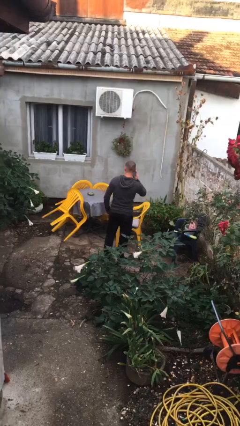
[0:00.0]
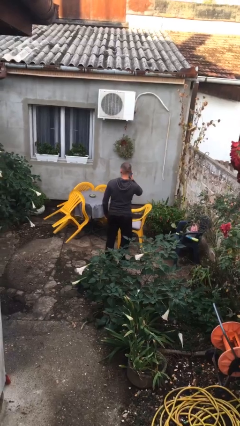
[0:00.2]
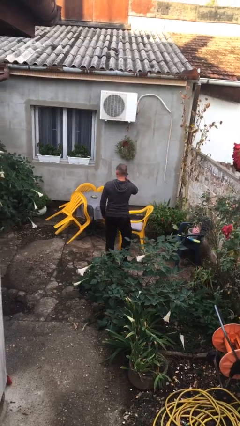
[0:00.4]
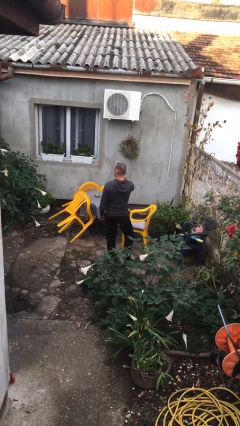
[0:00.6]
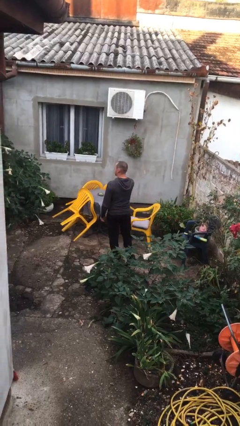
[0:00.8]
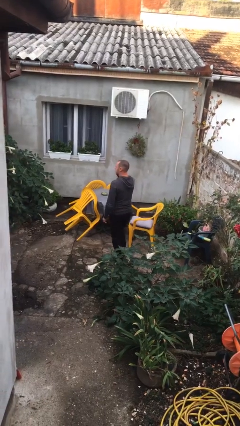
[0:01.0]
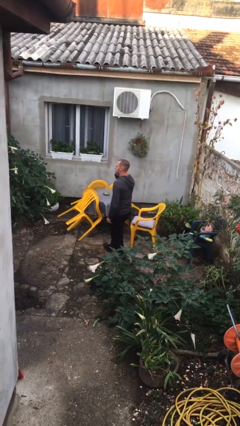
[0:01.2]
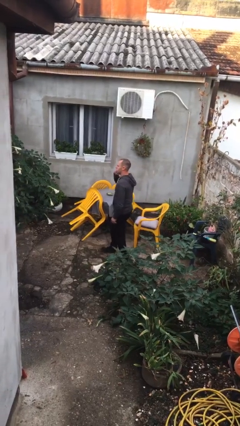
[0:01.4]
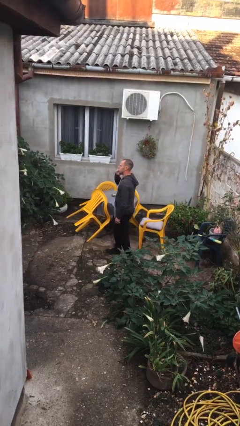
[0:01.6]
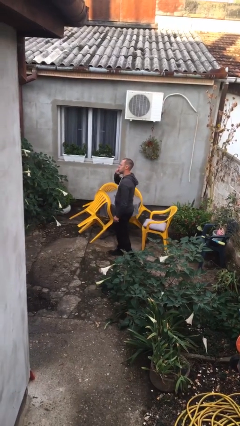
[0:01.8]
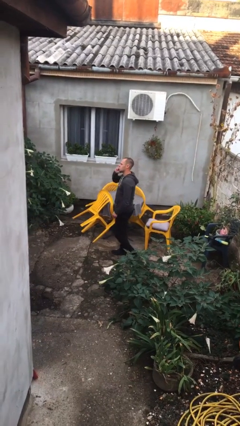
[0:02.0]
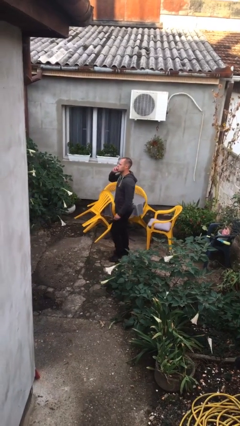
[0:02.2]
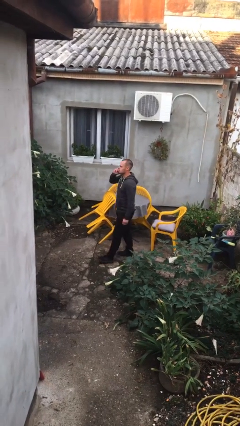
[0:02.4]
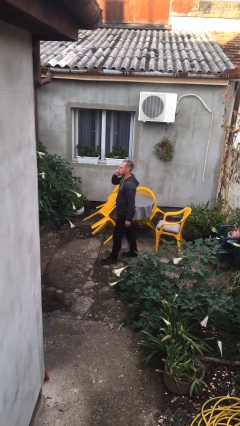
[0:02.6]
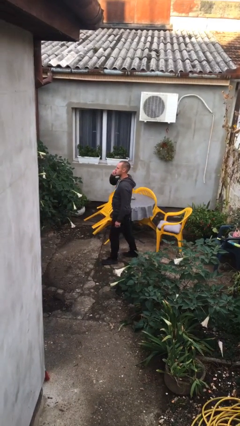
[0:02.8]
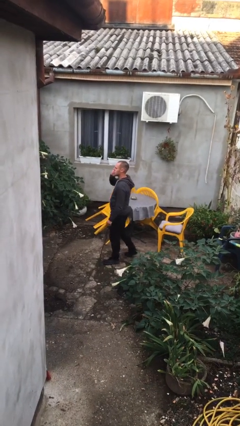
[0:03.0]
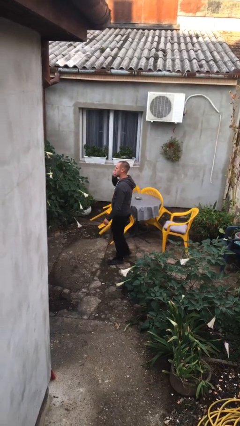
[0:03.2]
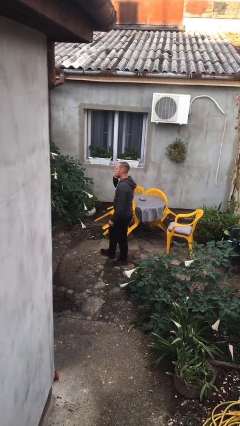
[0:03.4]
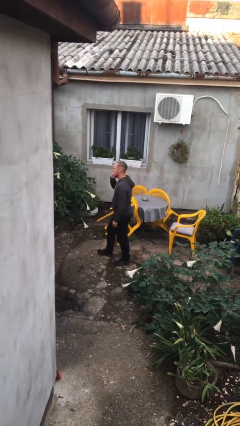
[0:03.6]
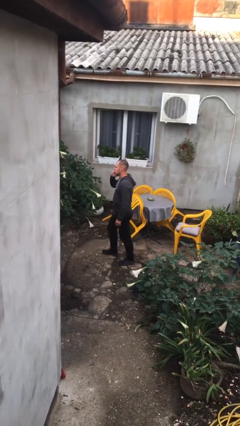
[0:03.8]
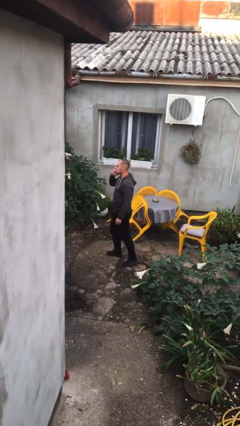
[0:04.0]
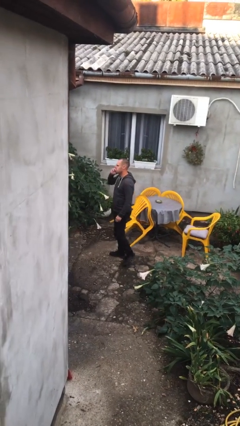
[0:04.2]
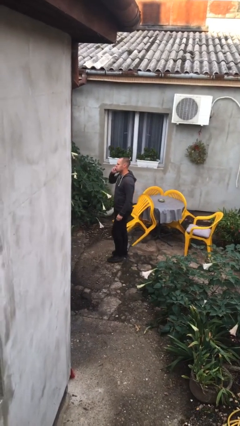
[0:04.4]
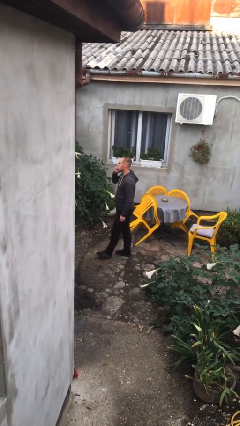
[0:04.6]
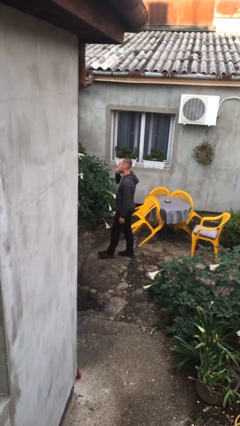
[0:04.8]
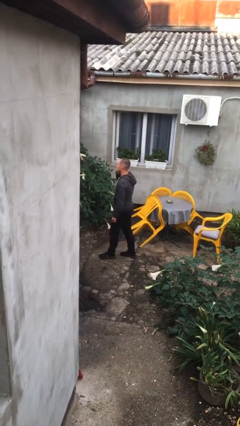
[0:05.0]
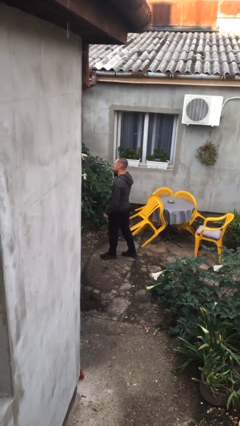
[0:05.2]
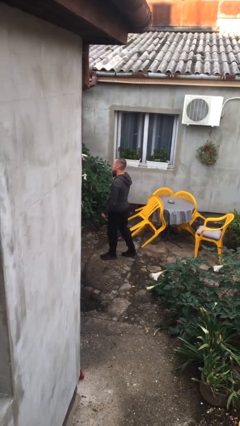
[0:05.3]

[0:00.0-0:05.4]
person talks on phone

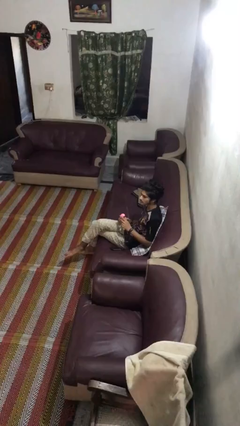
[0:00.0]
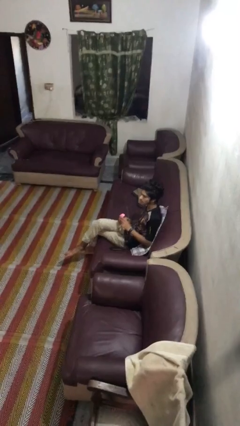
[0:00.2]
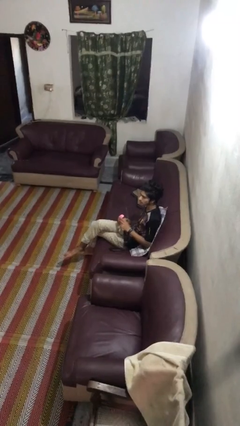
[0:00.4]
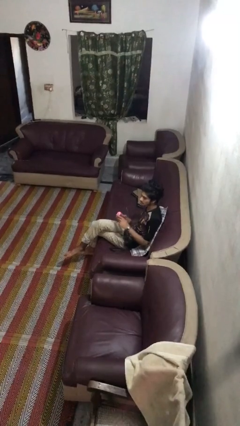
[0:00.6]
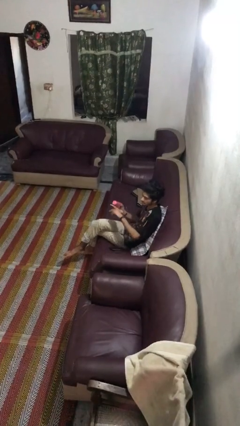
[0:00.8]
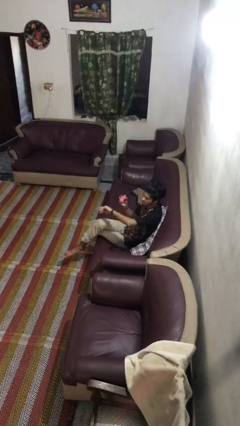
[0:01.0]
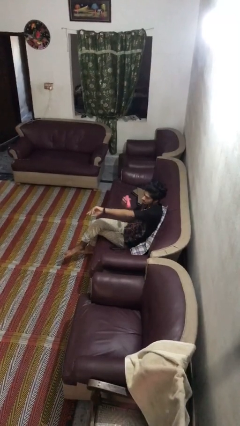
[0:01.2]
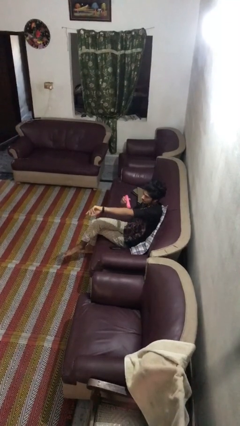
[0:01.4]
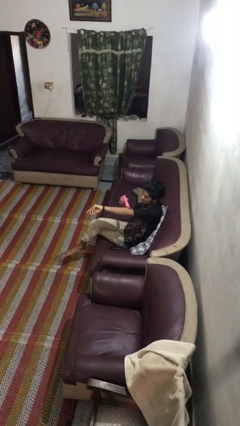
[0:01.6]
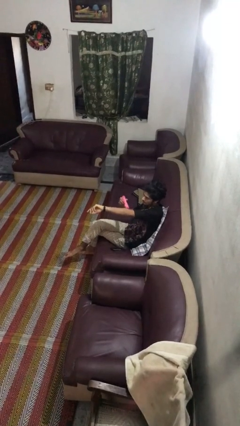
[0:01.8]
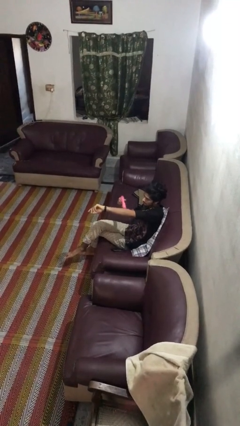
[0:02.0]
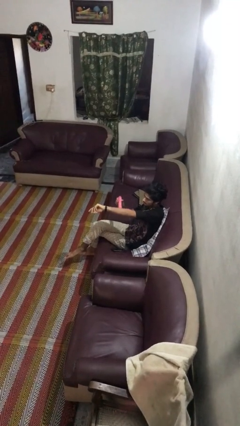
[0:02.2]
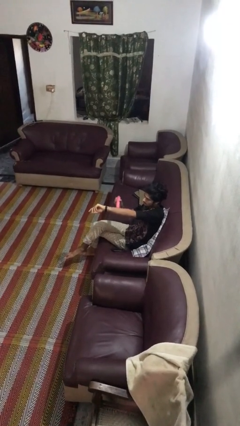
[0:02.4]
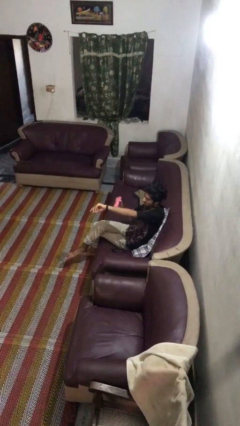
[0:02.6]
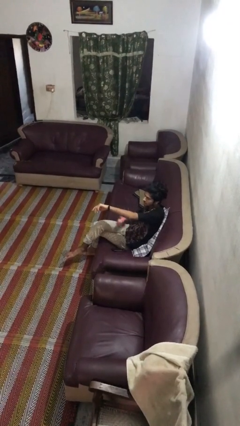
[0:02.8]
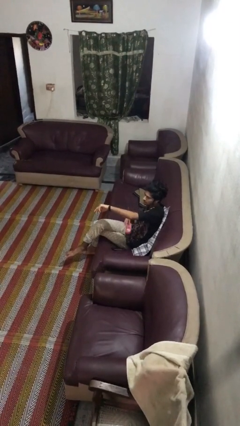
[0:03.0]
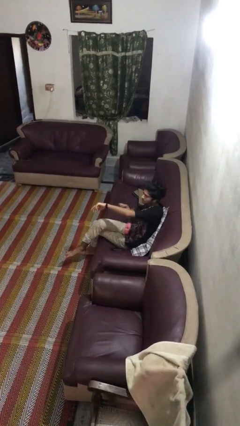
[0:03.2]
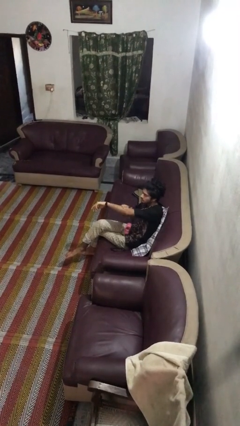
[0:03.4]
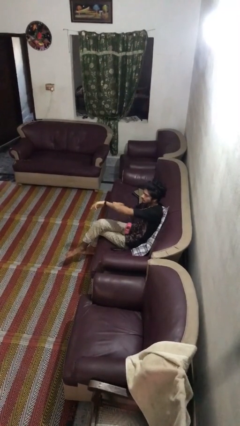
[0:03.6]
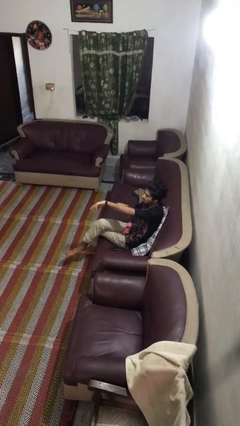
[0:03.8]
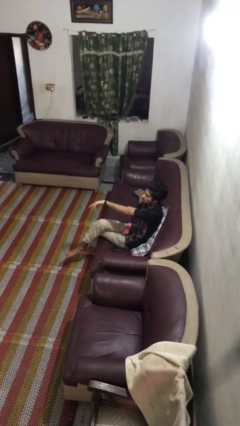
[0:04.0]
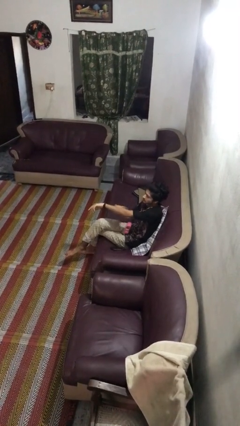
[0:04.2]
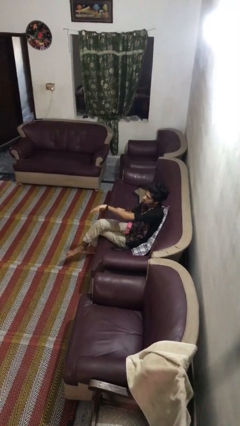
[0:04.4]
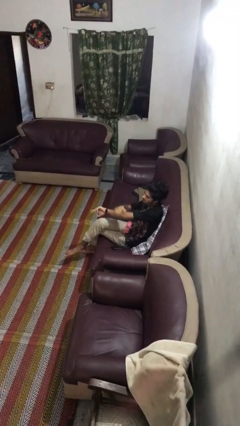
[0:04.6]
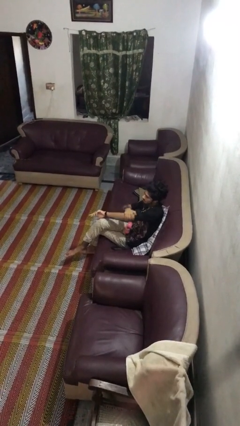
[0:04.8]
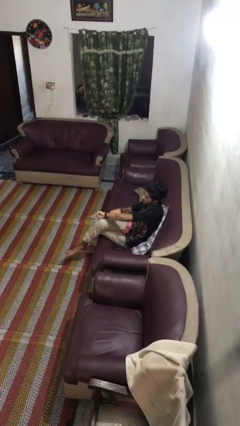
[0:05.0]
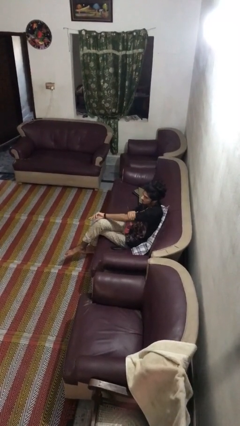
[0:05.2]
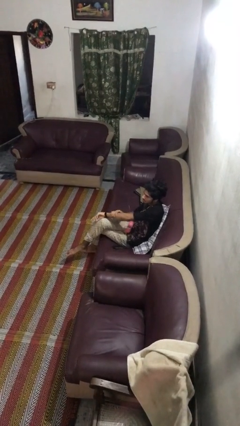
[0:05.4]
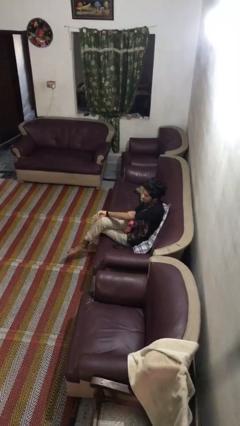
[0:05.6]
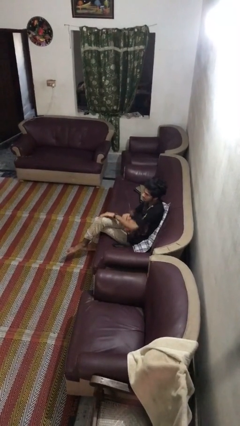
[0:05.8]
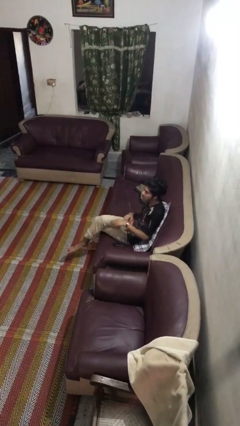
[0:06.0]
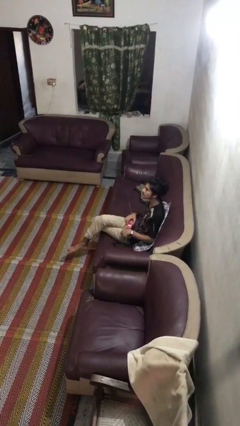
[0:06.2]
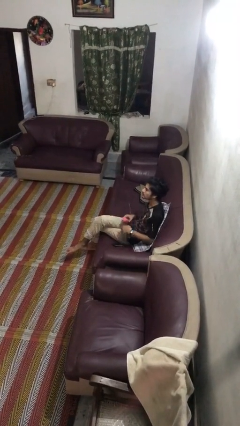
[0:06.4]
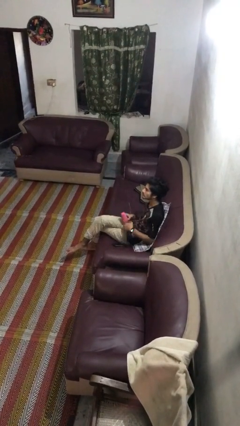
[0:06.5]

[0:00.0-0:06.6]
person applies sunscreen

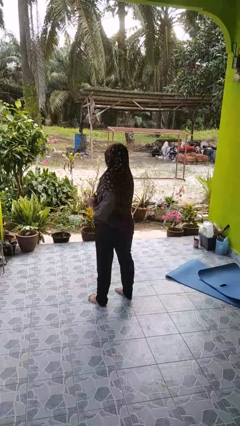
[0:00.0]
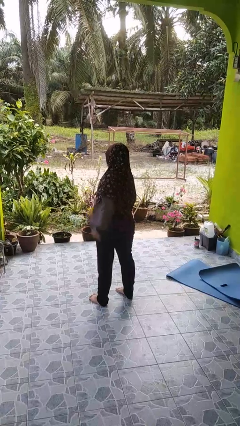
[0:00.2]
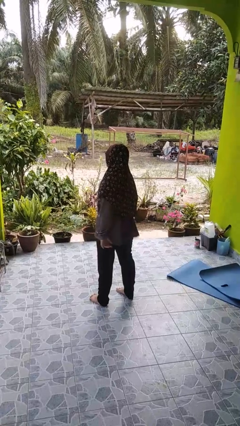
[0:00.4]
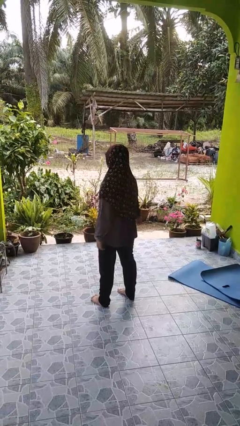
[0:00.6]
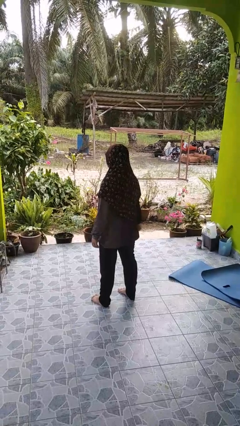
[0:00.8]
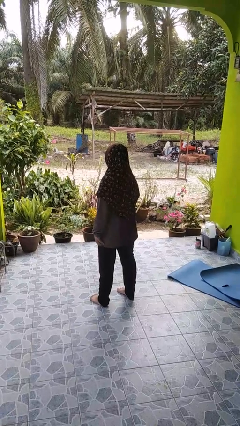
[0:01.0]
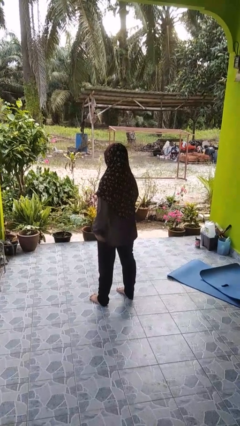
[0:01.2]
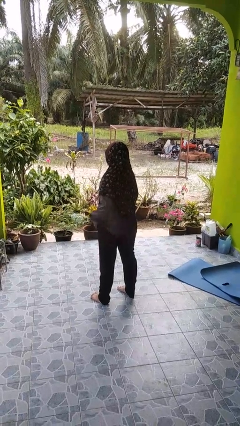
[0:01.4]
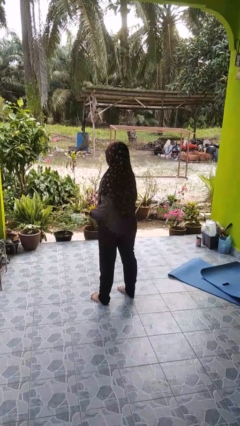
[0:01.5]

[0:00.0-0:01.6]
person untucks shirt

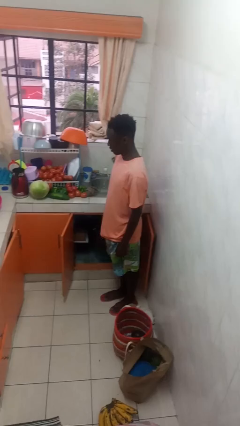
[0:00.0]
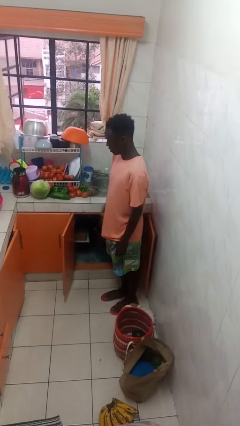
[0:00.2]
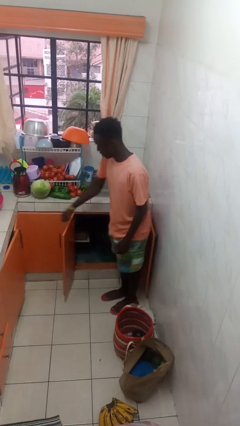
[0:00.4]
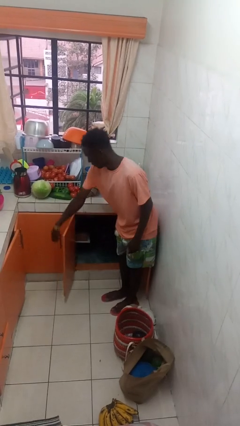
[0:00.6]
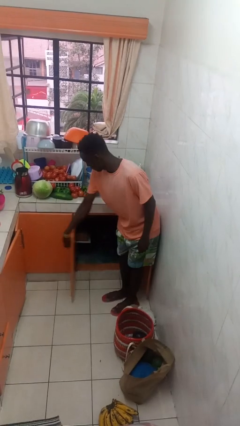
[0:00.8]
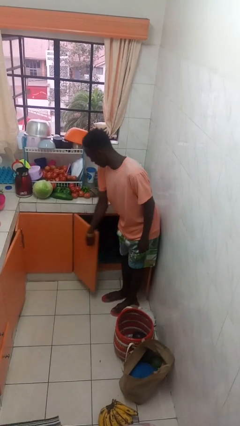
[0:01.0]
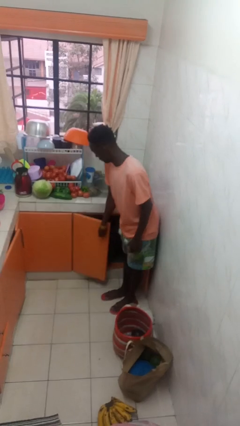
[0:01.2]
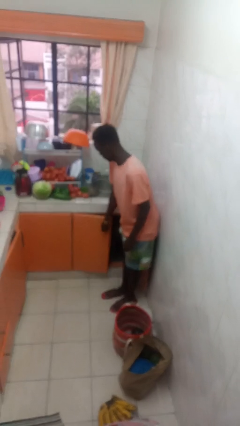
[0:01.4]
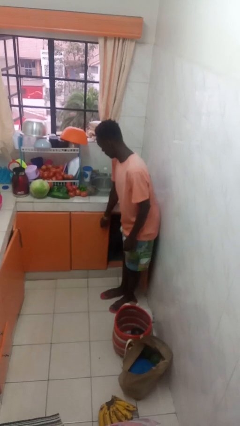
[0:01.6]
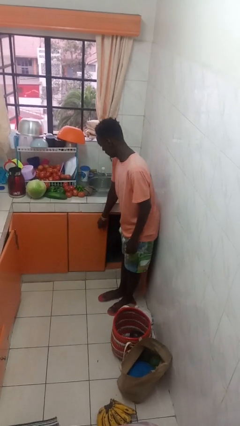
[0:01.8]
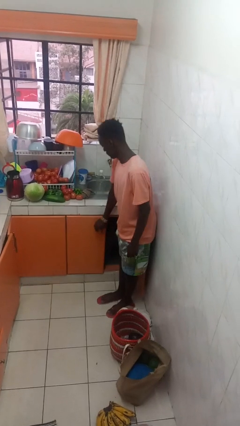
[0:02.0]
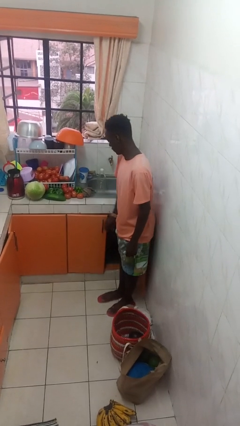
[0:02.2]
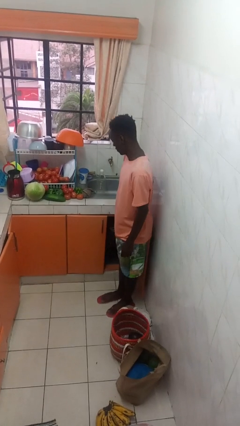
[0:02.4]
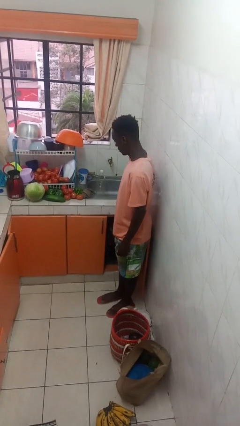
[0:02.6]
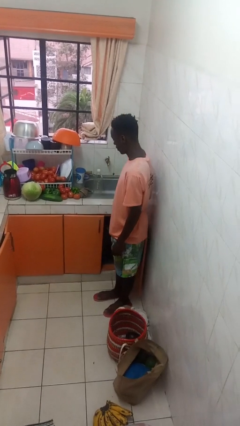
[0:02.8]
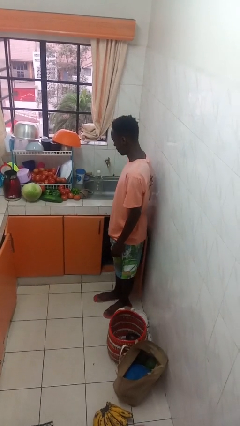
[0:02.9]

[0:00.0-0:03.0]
person closes cabinet

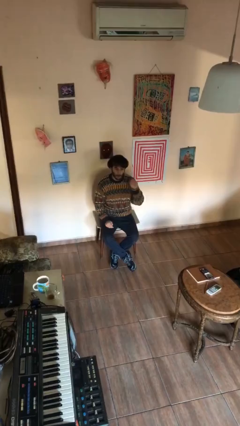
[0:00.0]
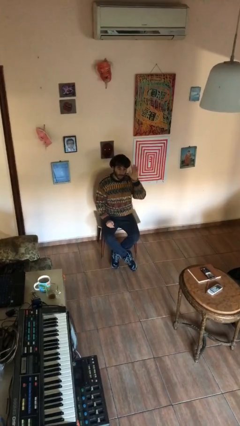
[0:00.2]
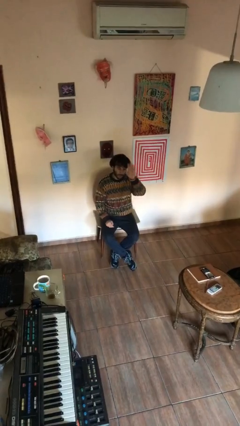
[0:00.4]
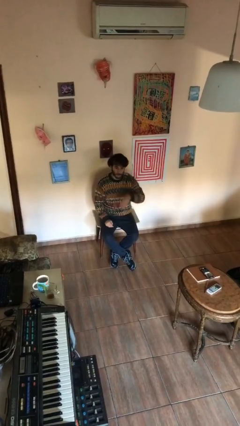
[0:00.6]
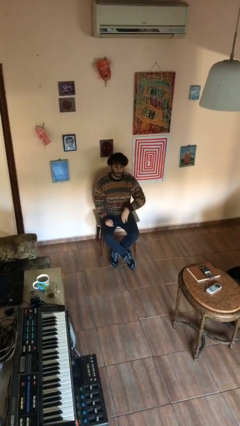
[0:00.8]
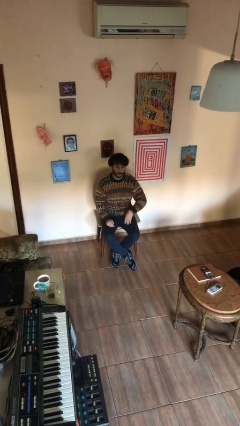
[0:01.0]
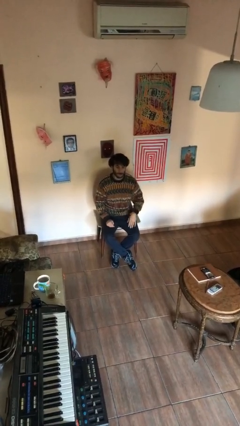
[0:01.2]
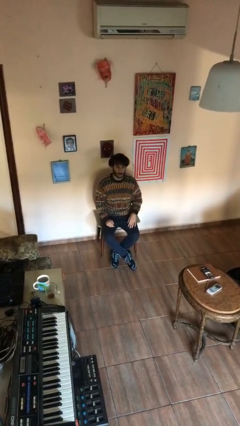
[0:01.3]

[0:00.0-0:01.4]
person gestures swipe down
